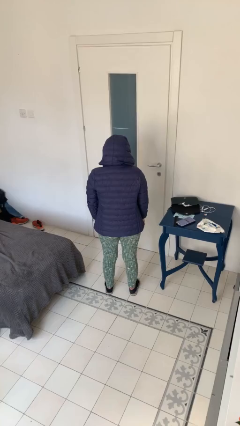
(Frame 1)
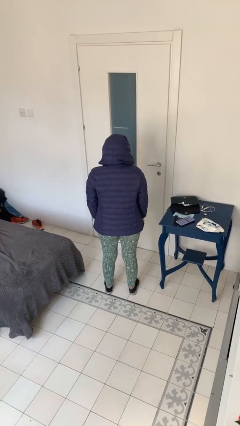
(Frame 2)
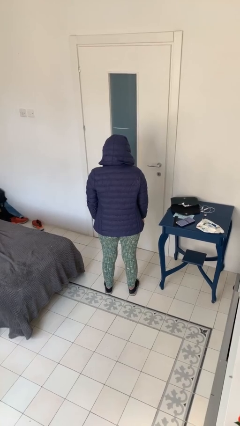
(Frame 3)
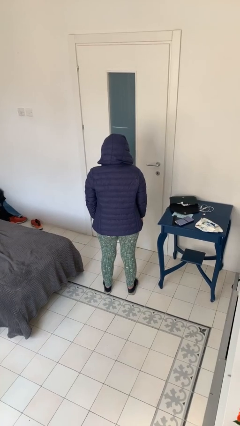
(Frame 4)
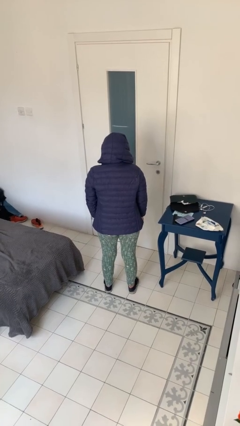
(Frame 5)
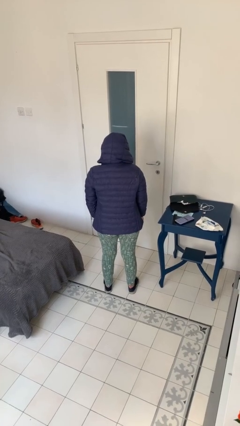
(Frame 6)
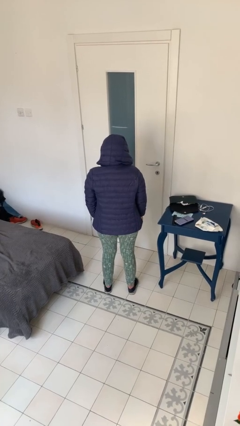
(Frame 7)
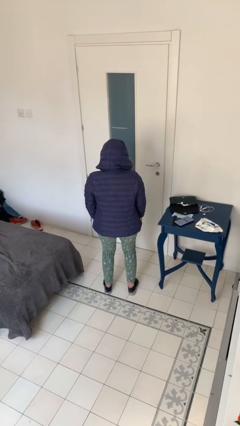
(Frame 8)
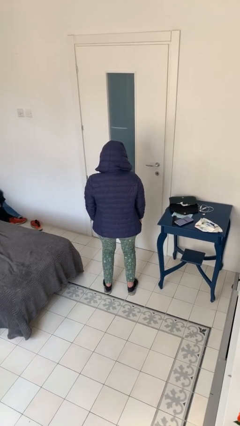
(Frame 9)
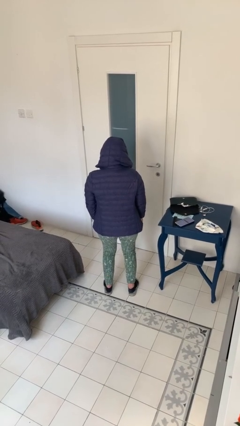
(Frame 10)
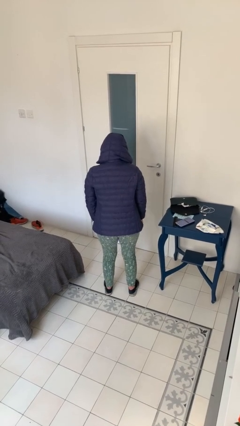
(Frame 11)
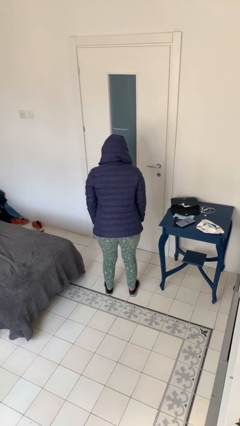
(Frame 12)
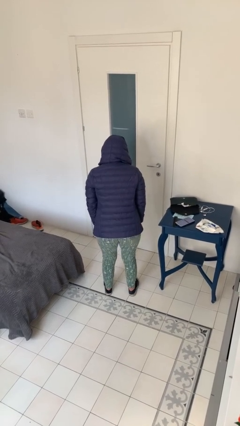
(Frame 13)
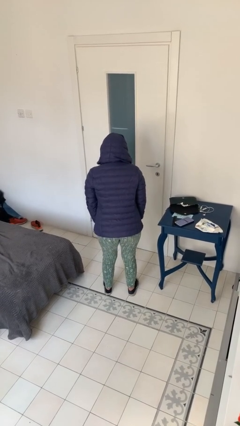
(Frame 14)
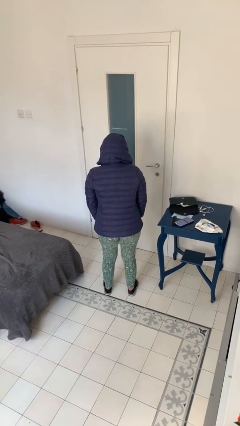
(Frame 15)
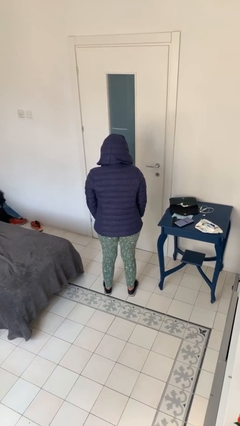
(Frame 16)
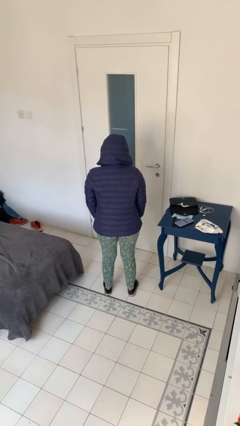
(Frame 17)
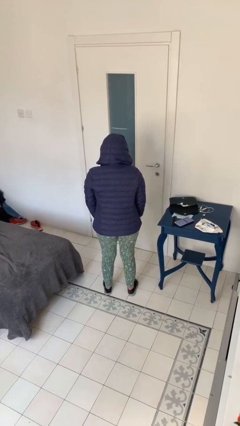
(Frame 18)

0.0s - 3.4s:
person wiggles hips

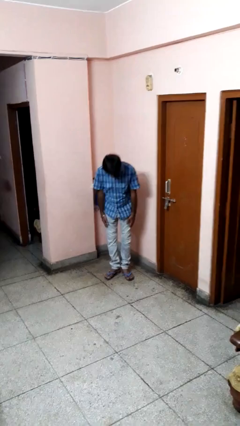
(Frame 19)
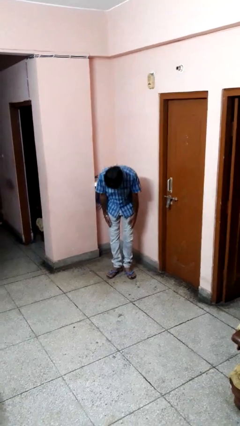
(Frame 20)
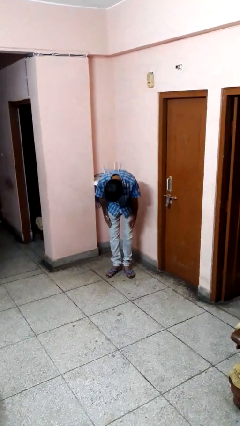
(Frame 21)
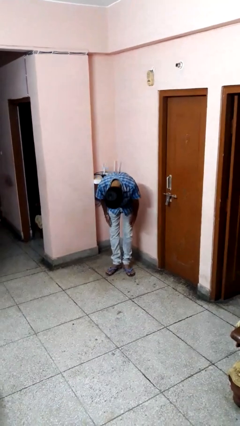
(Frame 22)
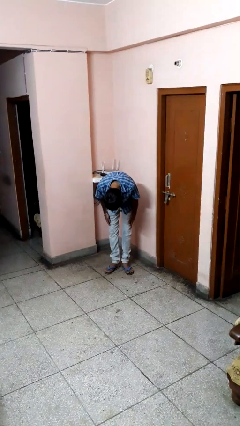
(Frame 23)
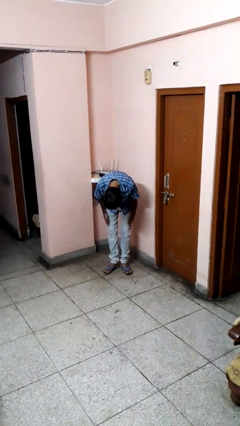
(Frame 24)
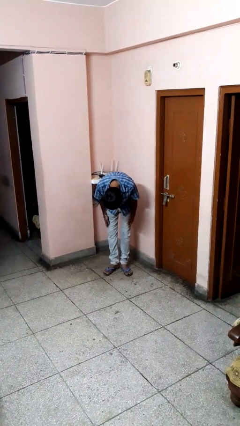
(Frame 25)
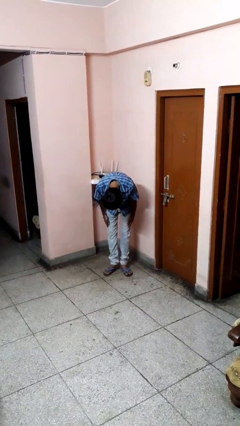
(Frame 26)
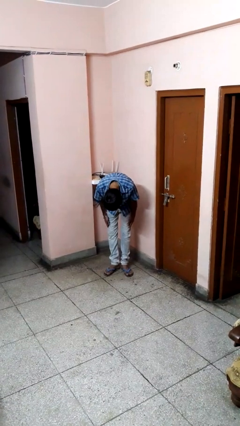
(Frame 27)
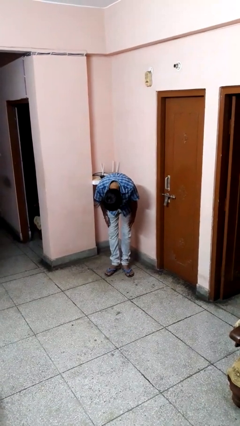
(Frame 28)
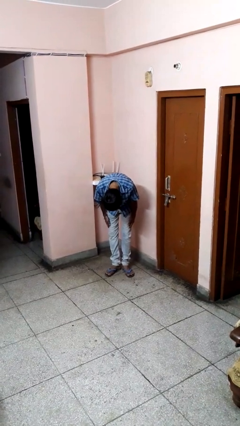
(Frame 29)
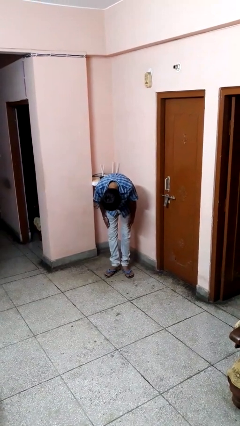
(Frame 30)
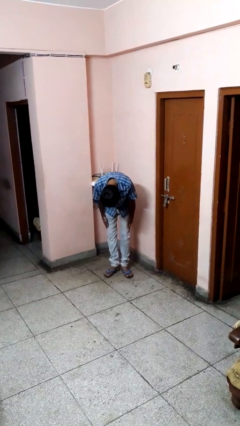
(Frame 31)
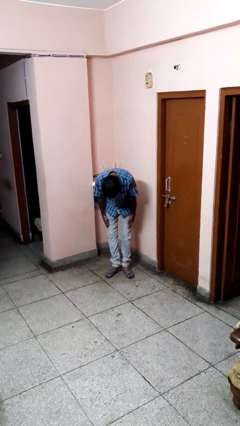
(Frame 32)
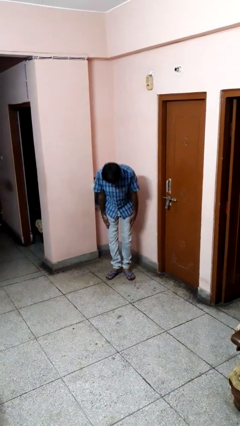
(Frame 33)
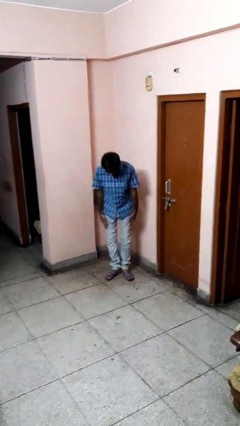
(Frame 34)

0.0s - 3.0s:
person bows

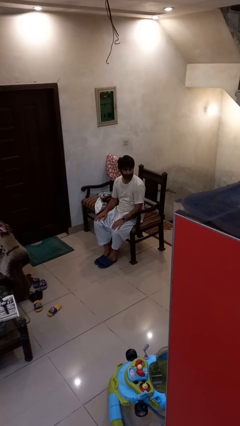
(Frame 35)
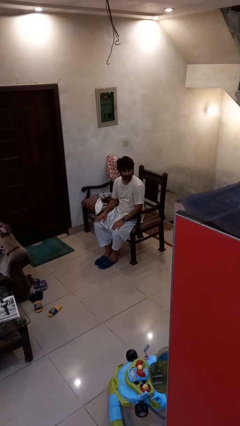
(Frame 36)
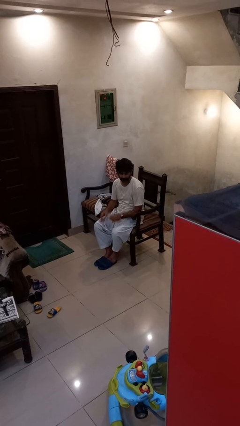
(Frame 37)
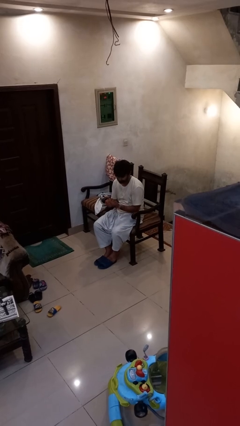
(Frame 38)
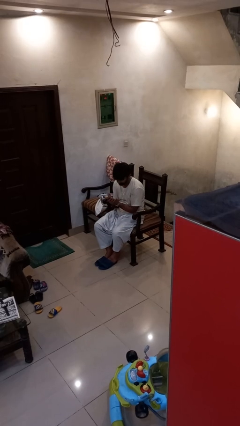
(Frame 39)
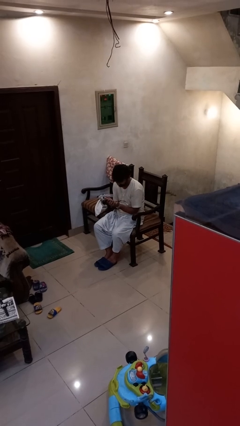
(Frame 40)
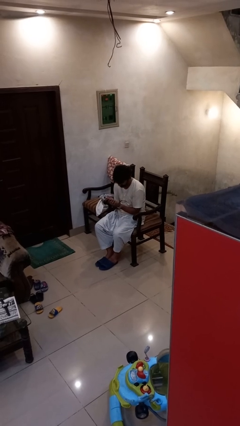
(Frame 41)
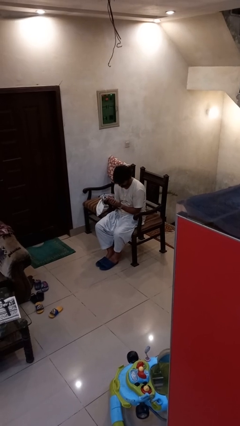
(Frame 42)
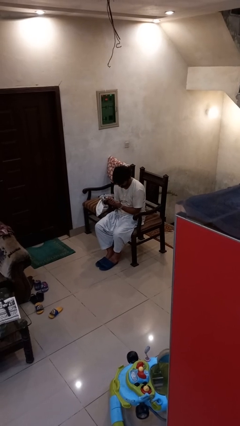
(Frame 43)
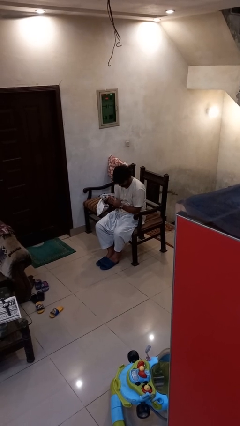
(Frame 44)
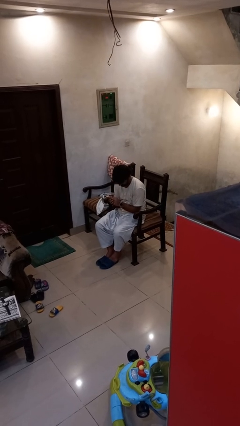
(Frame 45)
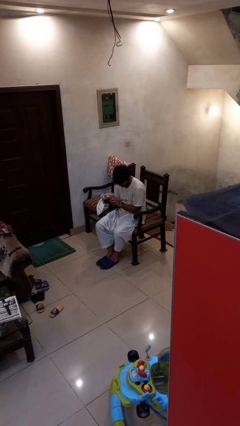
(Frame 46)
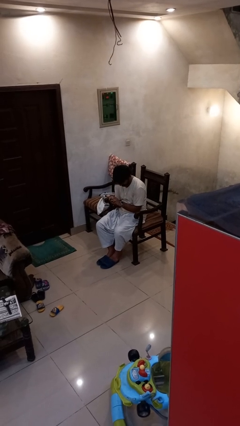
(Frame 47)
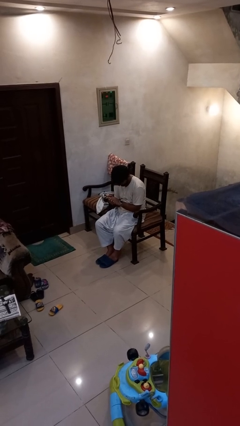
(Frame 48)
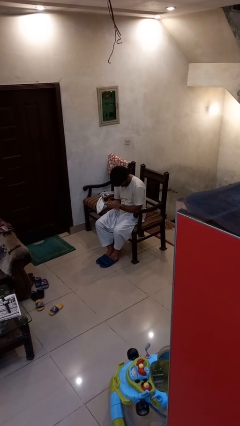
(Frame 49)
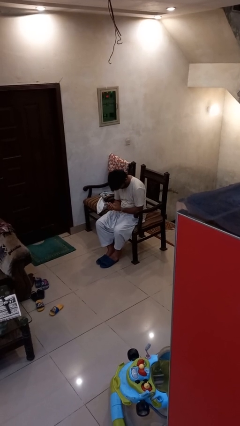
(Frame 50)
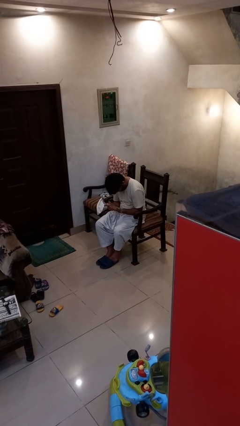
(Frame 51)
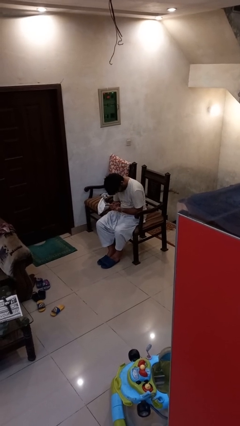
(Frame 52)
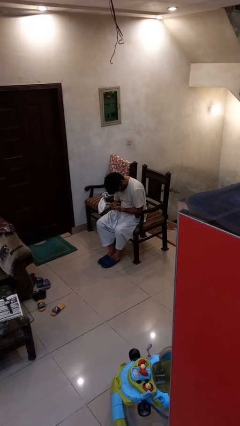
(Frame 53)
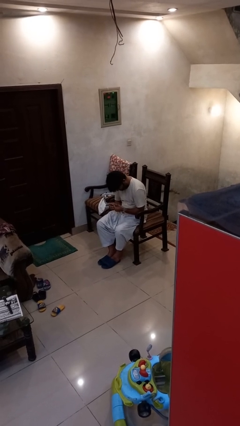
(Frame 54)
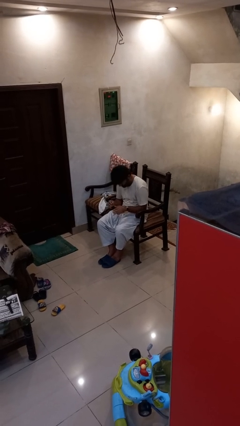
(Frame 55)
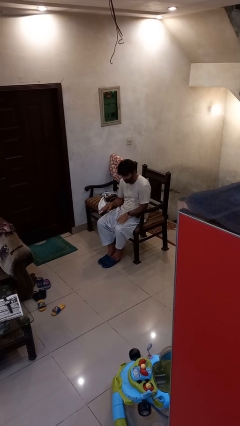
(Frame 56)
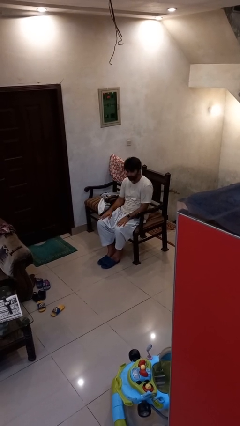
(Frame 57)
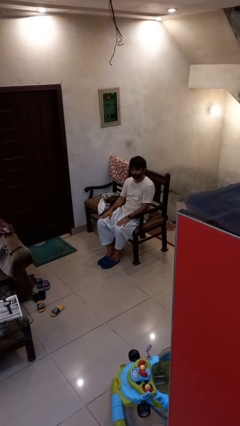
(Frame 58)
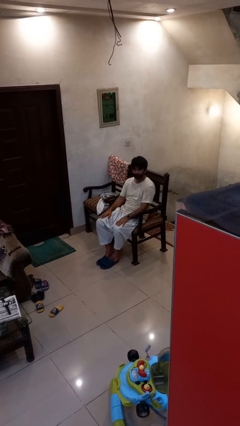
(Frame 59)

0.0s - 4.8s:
person looks at hands in lap

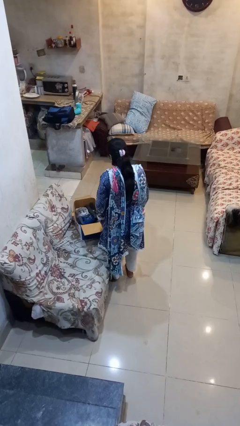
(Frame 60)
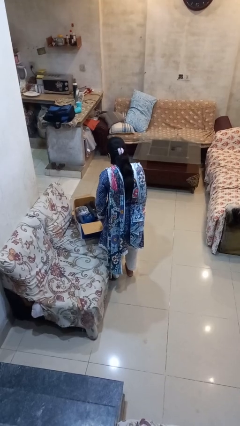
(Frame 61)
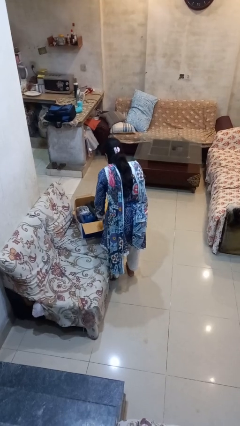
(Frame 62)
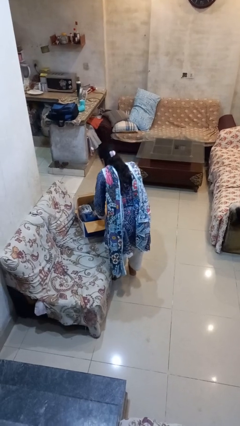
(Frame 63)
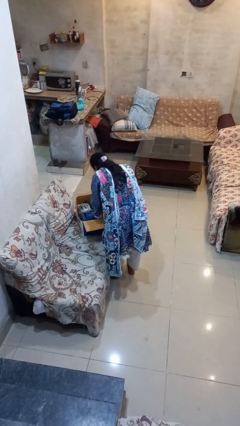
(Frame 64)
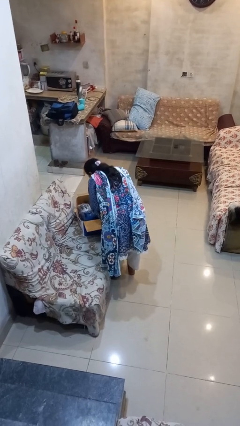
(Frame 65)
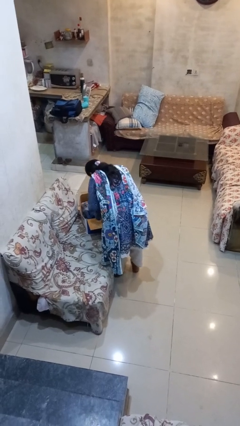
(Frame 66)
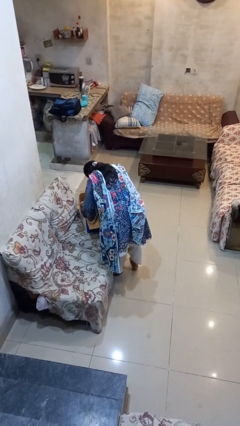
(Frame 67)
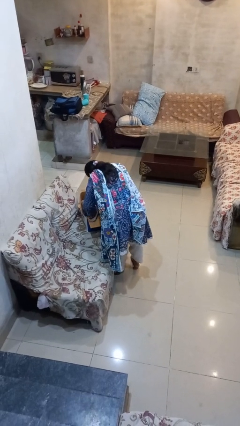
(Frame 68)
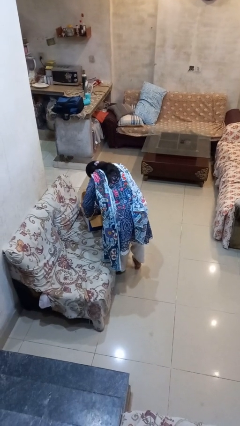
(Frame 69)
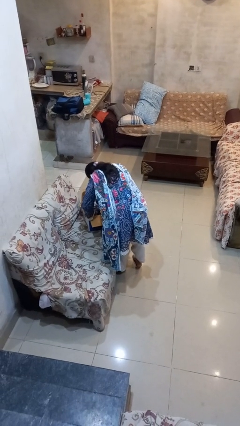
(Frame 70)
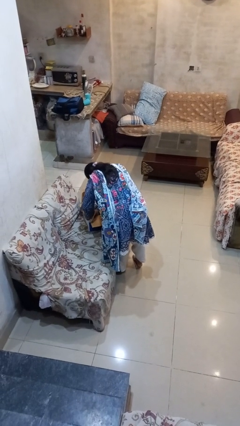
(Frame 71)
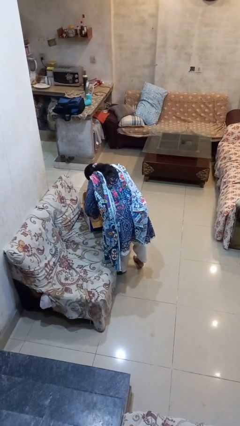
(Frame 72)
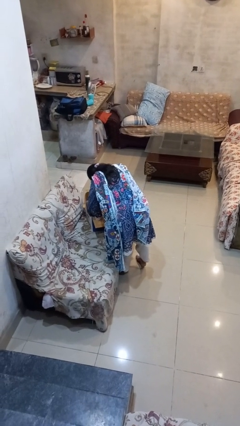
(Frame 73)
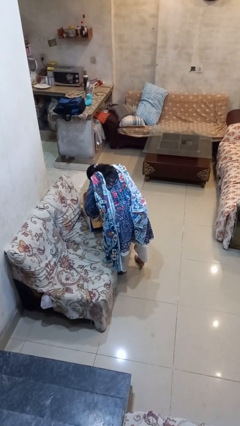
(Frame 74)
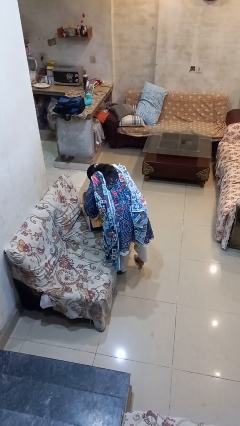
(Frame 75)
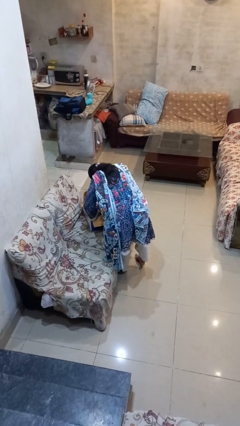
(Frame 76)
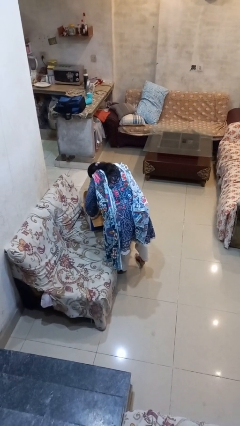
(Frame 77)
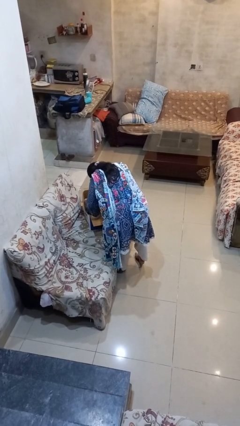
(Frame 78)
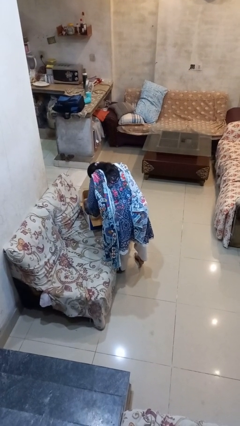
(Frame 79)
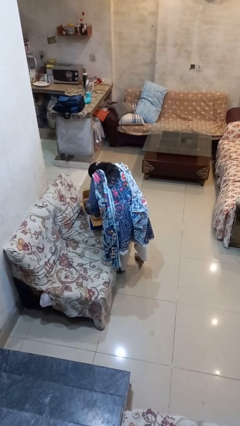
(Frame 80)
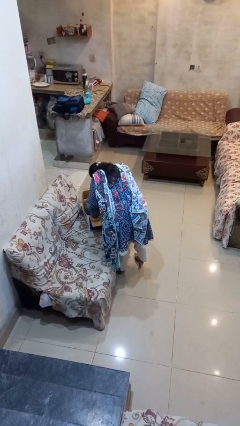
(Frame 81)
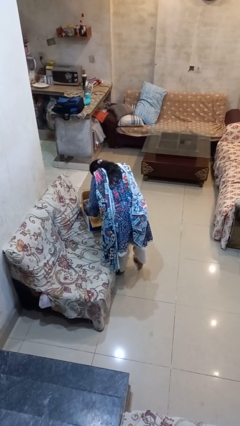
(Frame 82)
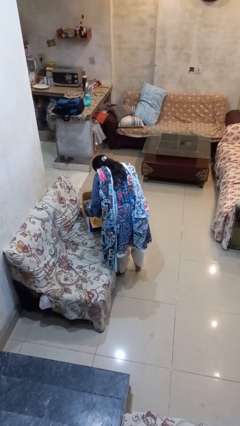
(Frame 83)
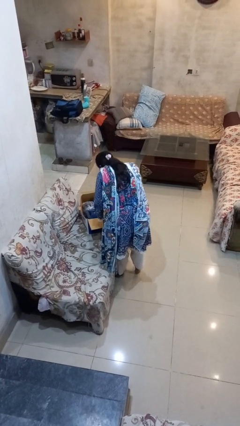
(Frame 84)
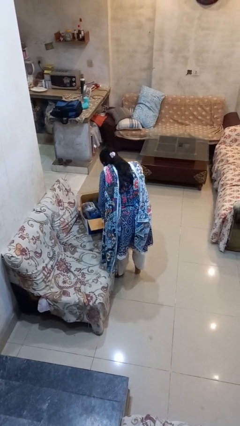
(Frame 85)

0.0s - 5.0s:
person searches in box

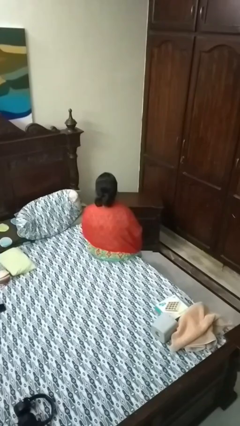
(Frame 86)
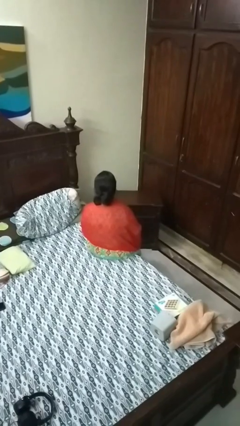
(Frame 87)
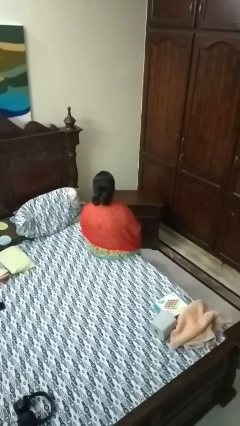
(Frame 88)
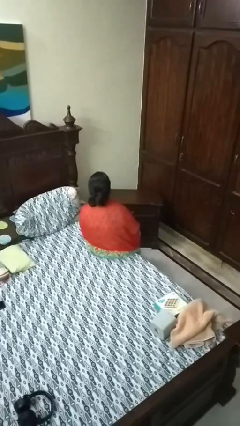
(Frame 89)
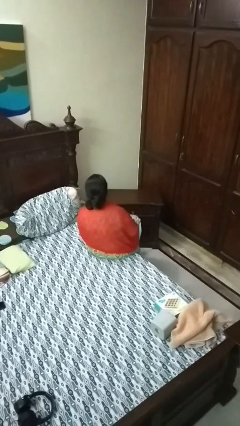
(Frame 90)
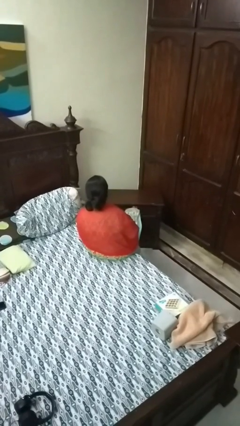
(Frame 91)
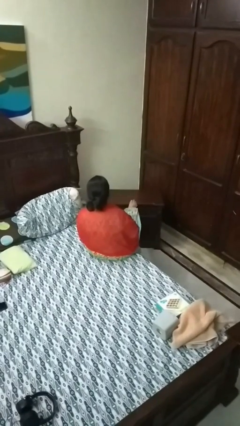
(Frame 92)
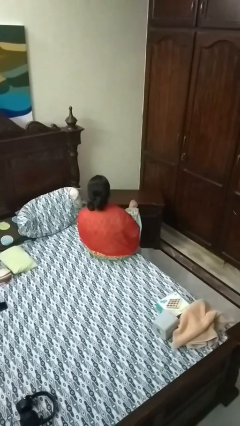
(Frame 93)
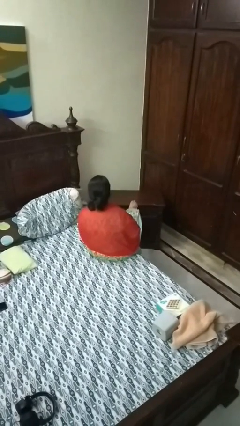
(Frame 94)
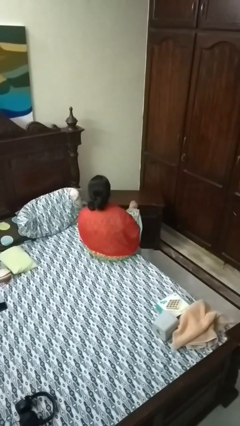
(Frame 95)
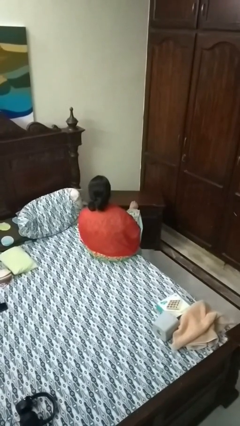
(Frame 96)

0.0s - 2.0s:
person puts feet up
